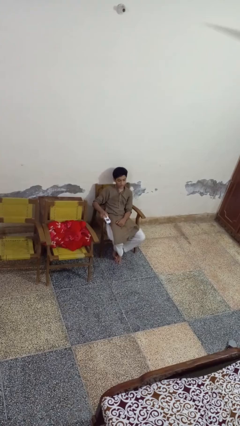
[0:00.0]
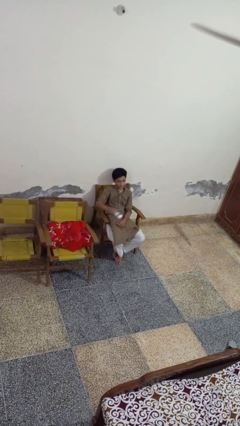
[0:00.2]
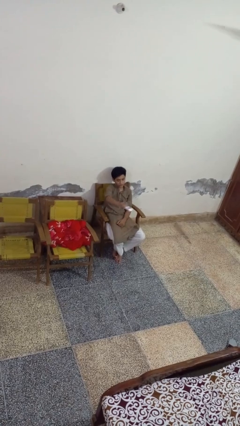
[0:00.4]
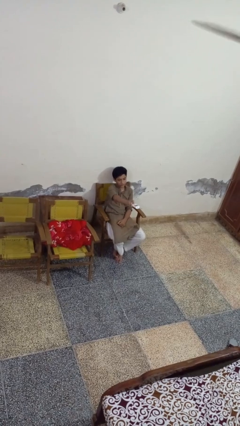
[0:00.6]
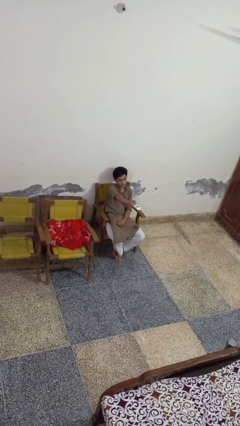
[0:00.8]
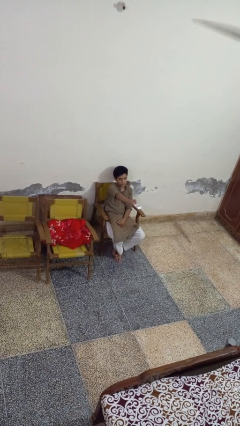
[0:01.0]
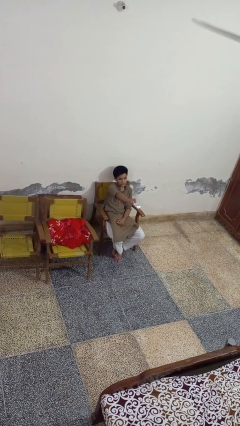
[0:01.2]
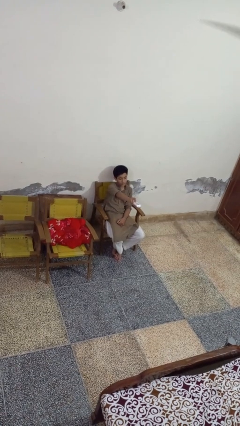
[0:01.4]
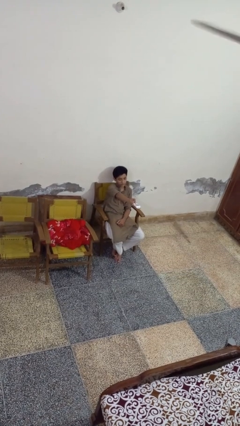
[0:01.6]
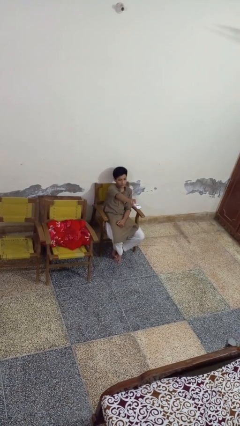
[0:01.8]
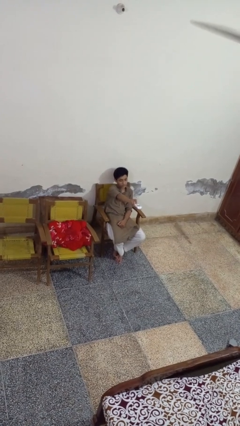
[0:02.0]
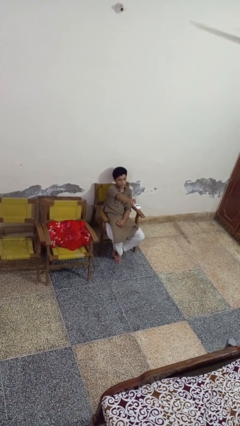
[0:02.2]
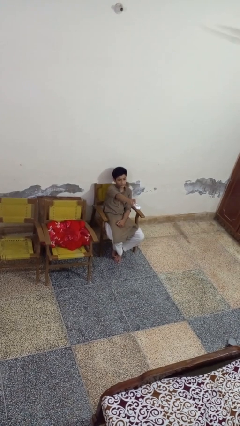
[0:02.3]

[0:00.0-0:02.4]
person uses television remote

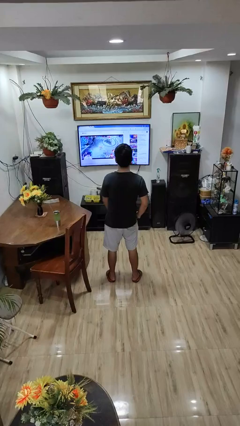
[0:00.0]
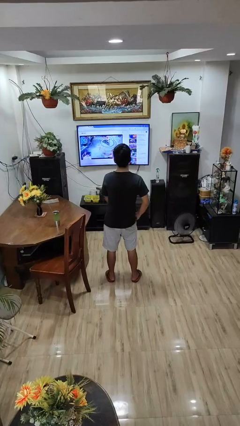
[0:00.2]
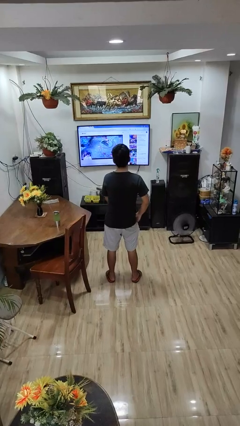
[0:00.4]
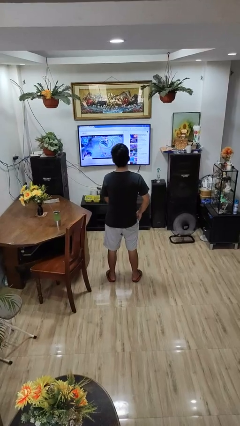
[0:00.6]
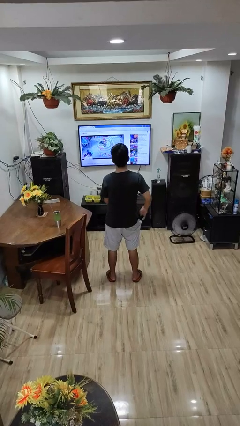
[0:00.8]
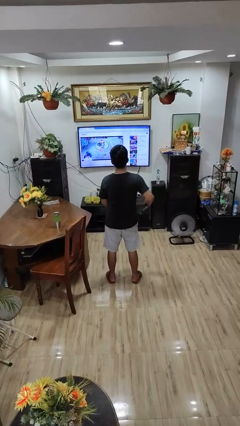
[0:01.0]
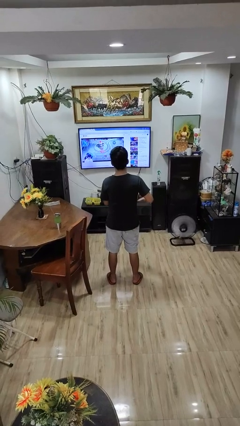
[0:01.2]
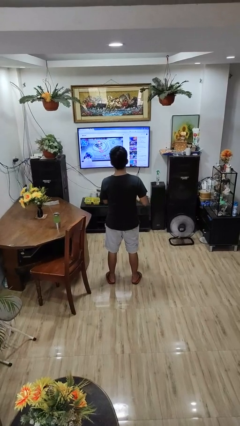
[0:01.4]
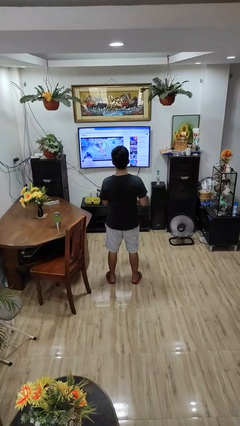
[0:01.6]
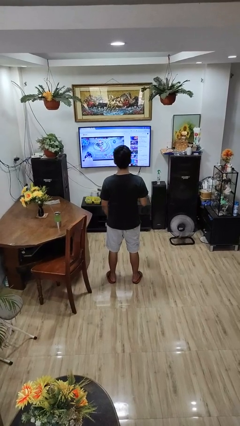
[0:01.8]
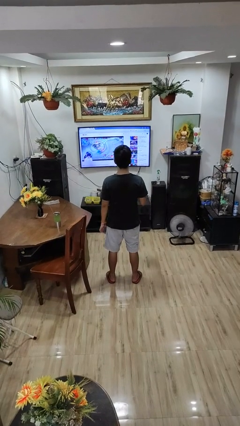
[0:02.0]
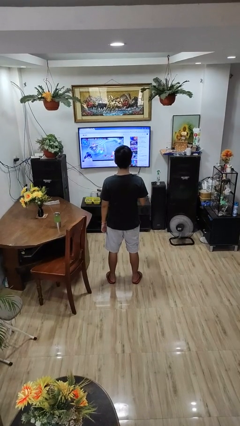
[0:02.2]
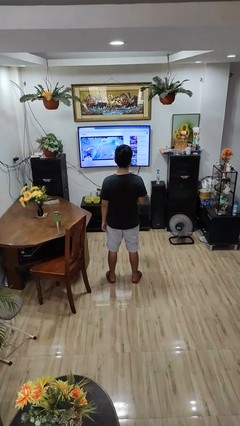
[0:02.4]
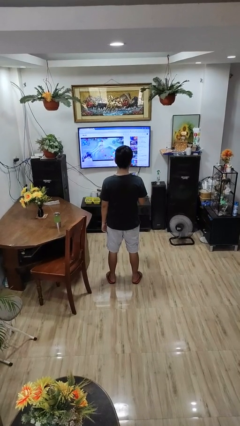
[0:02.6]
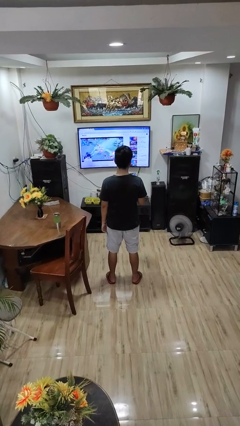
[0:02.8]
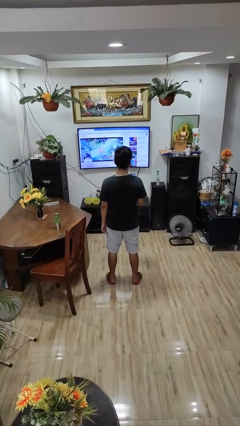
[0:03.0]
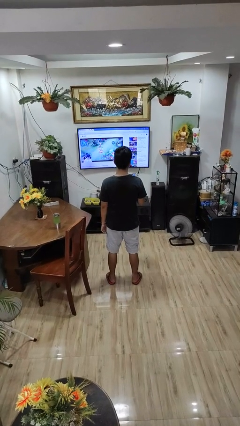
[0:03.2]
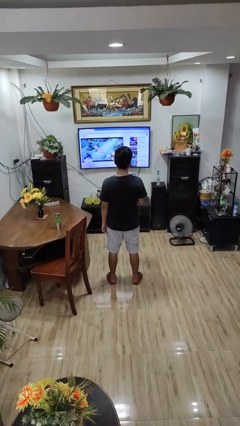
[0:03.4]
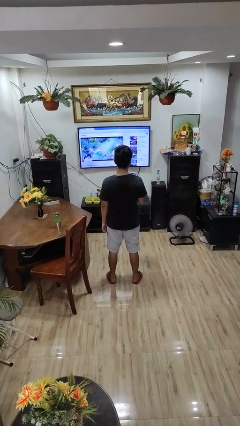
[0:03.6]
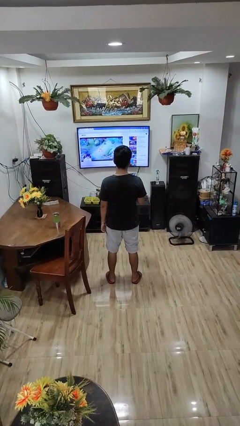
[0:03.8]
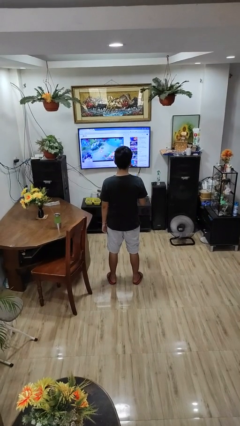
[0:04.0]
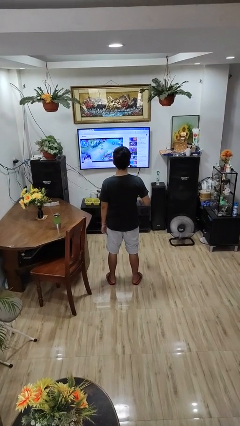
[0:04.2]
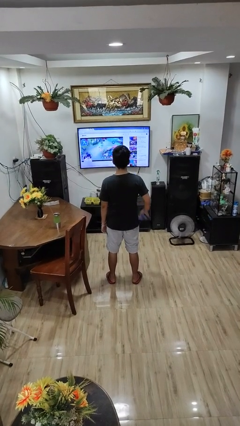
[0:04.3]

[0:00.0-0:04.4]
person takes phone from pocket

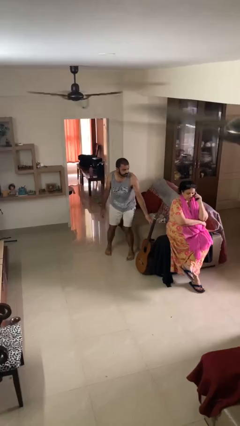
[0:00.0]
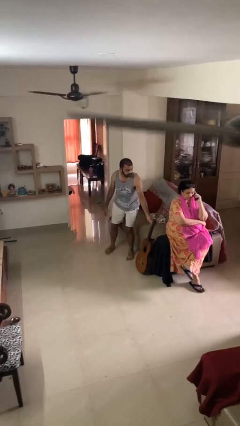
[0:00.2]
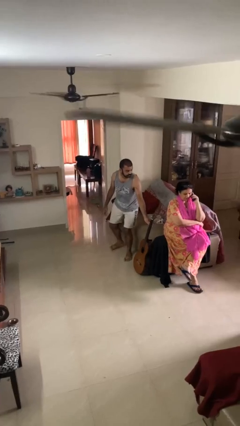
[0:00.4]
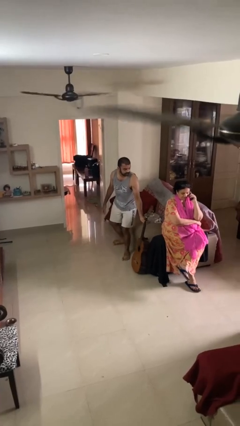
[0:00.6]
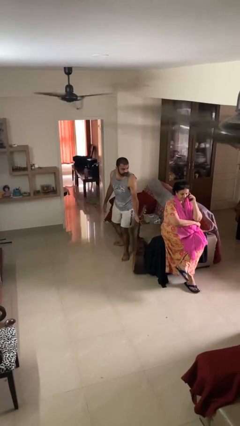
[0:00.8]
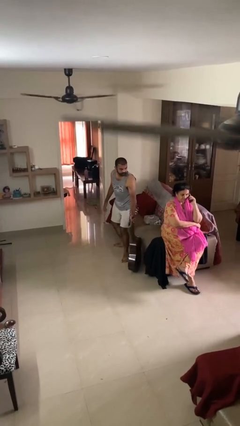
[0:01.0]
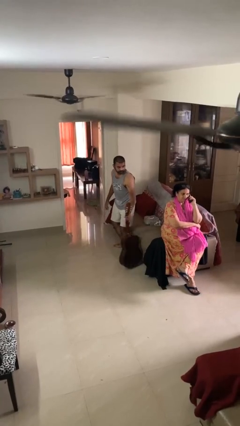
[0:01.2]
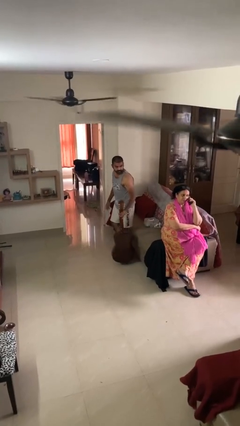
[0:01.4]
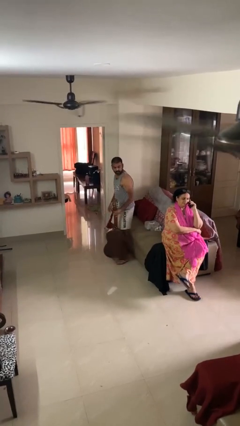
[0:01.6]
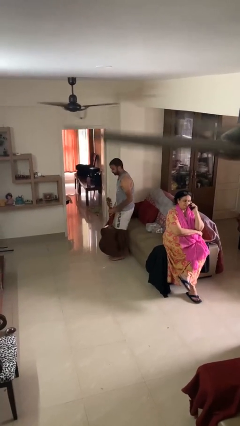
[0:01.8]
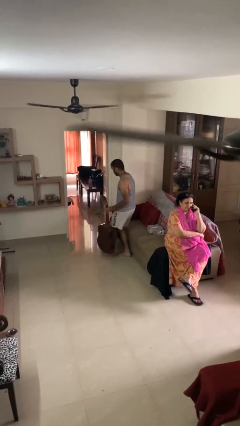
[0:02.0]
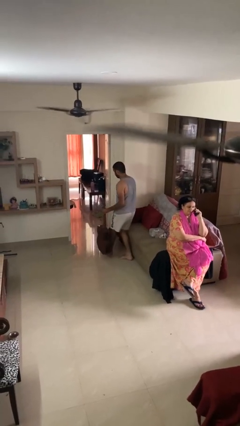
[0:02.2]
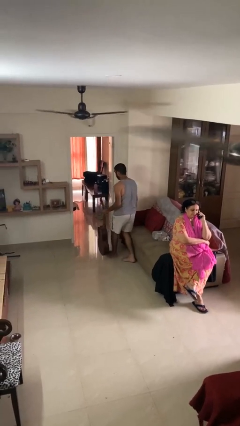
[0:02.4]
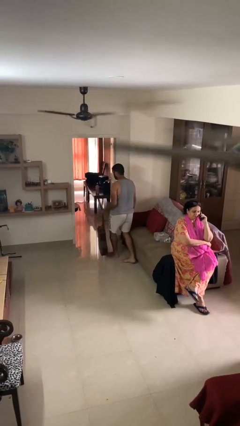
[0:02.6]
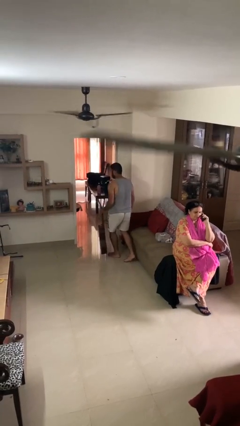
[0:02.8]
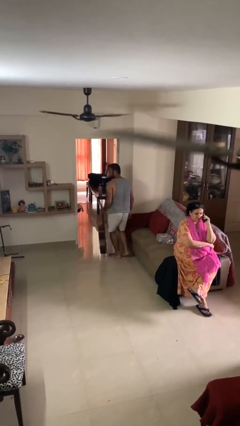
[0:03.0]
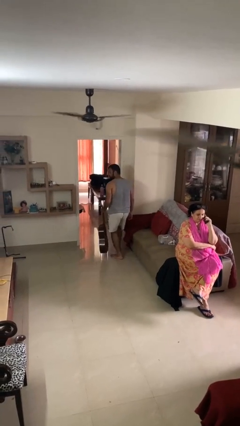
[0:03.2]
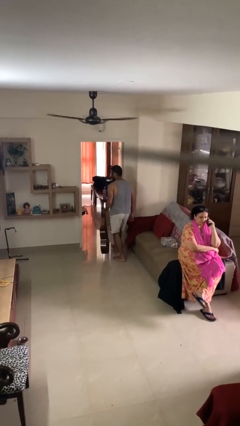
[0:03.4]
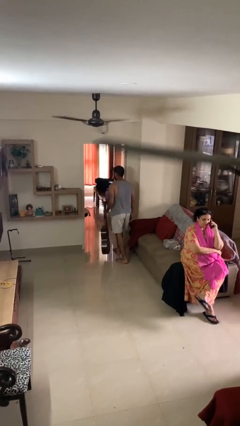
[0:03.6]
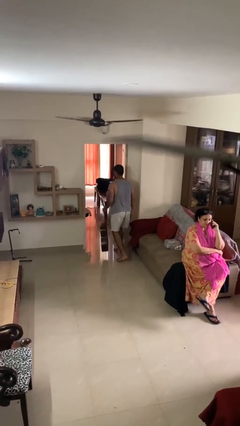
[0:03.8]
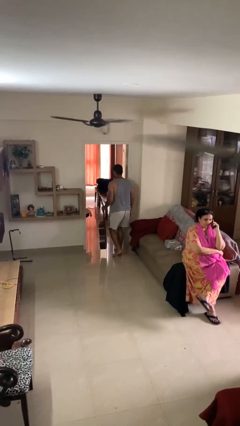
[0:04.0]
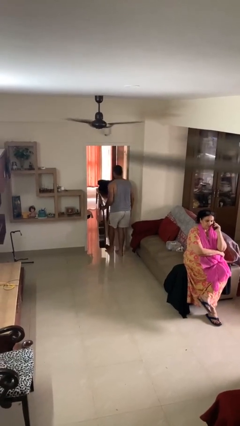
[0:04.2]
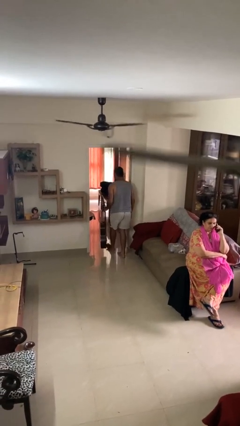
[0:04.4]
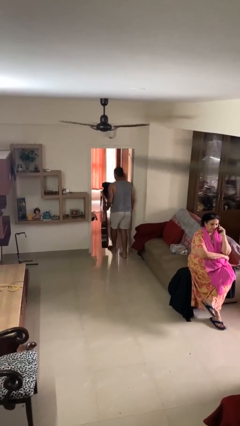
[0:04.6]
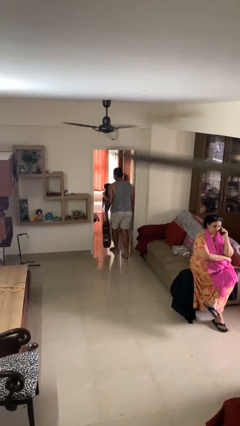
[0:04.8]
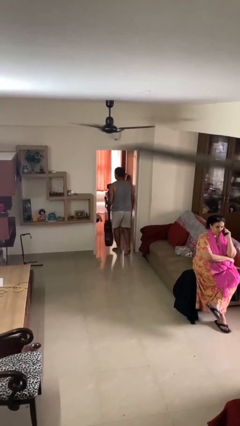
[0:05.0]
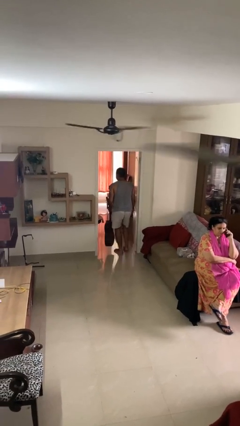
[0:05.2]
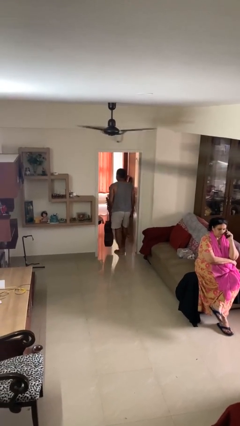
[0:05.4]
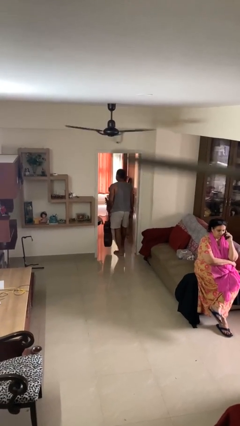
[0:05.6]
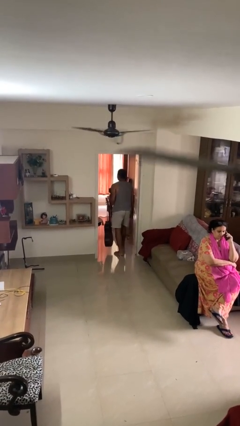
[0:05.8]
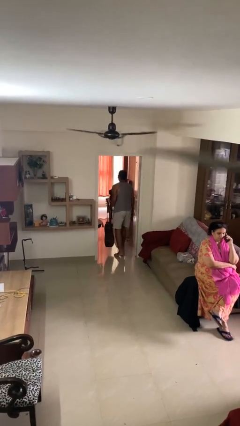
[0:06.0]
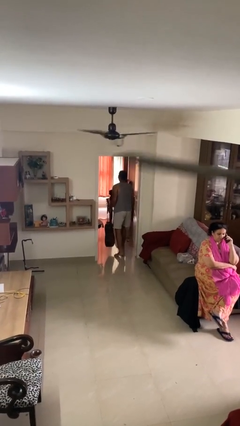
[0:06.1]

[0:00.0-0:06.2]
person steals object from person

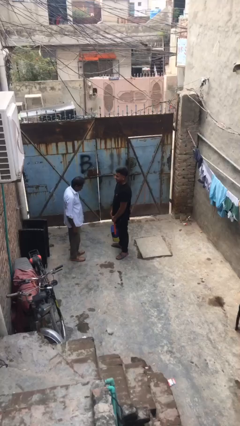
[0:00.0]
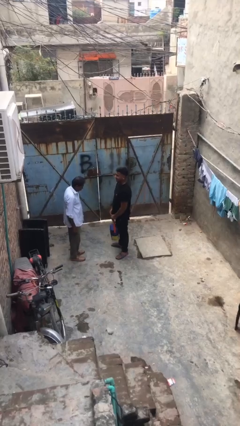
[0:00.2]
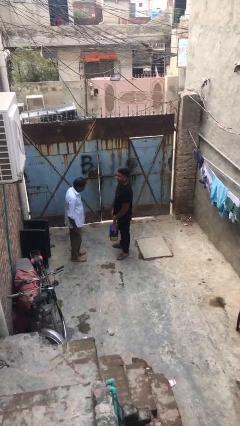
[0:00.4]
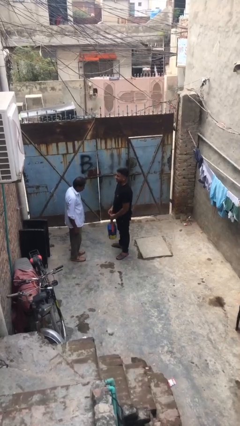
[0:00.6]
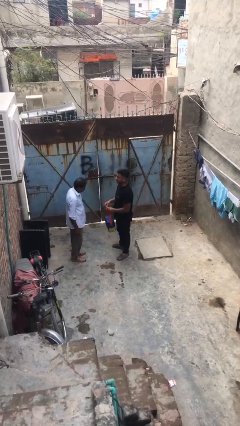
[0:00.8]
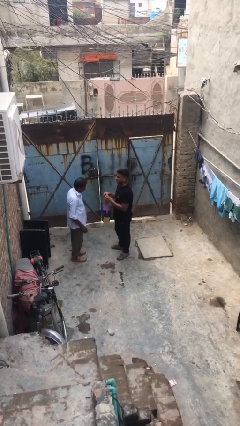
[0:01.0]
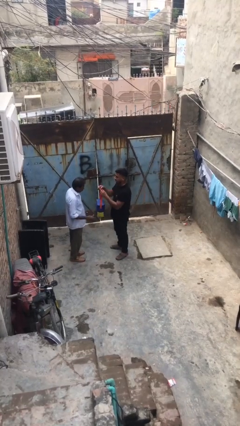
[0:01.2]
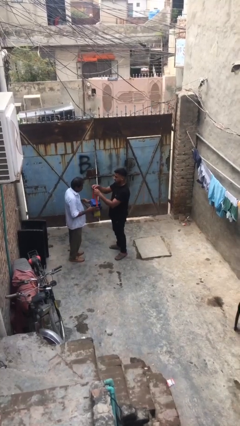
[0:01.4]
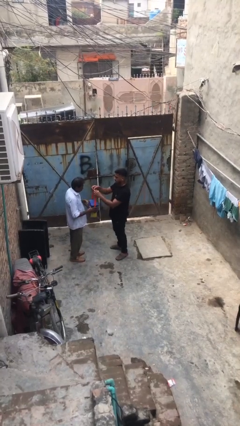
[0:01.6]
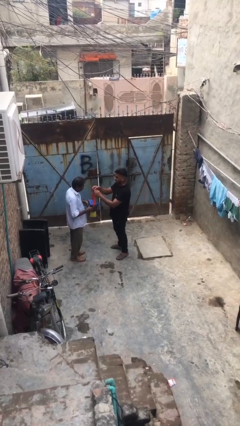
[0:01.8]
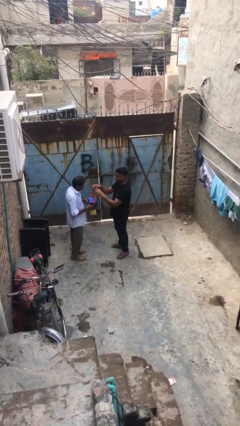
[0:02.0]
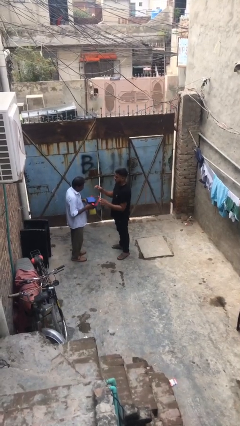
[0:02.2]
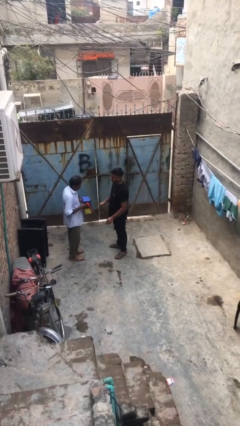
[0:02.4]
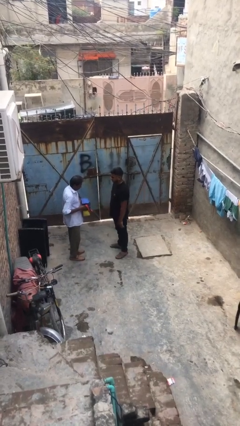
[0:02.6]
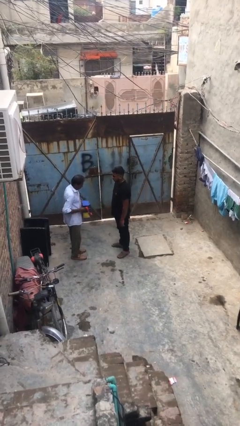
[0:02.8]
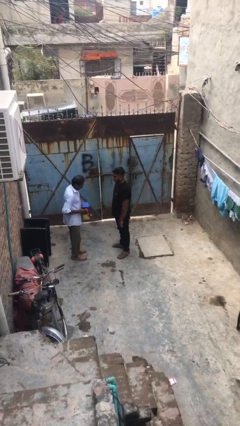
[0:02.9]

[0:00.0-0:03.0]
person transfers object to person

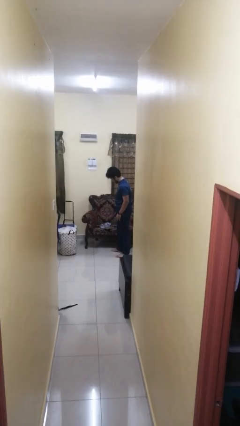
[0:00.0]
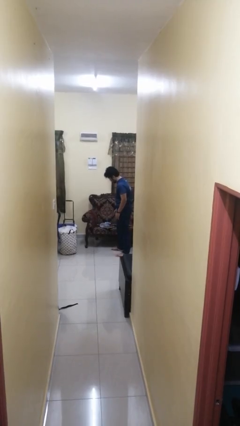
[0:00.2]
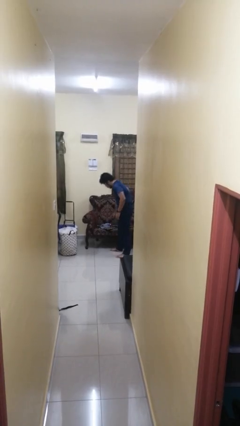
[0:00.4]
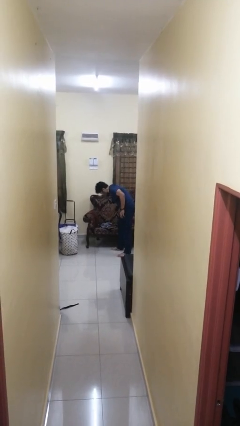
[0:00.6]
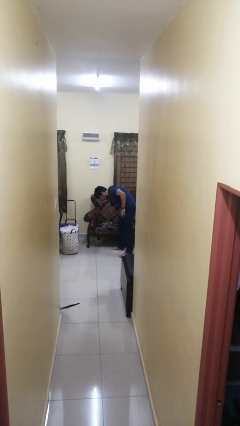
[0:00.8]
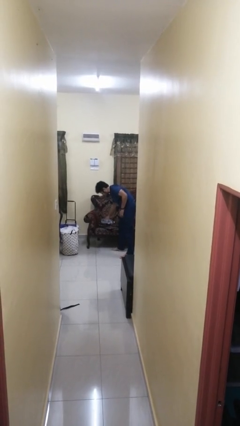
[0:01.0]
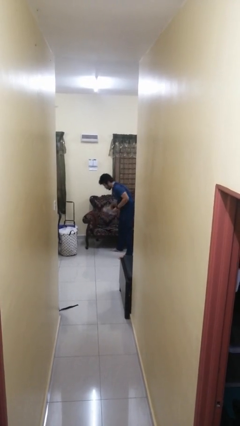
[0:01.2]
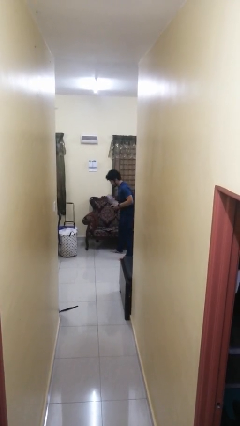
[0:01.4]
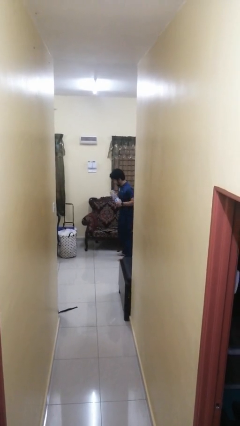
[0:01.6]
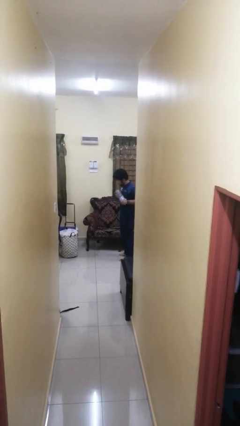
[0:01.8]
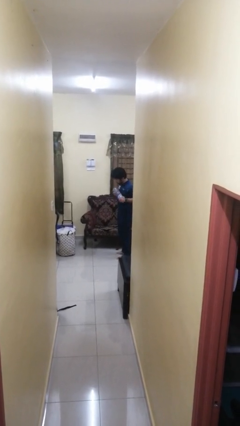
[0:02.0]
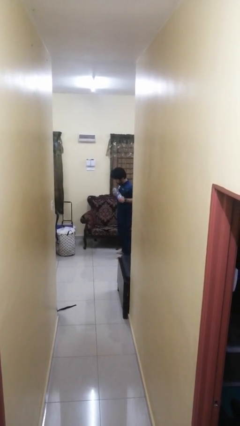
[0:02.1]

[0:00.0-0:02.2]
person picks up object from couch
